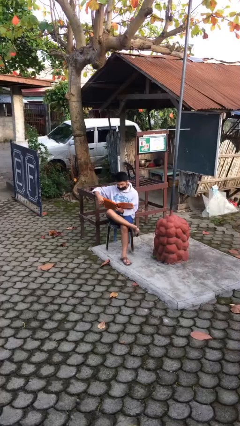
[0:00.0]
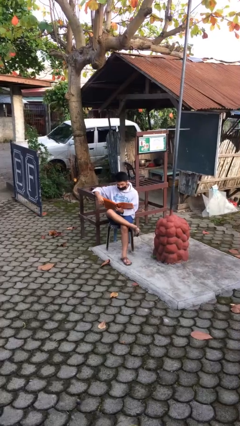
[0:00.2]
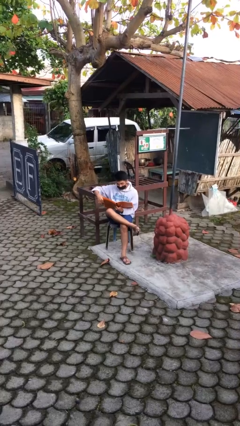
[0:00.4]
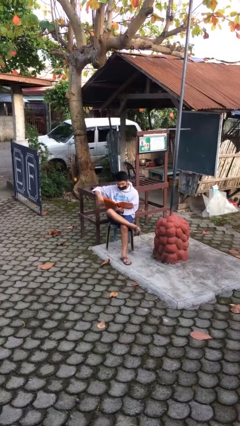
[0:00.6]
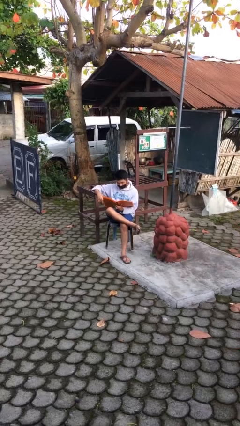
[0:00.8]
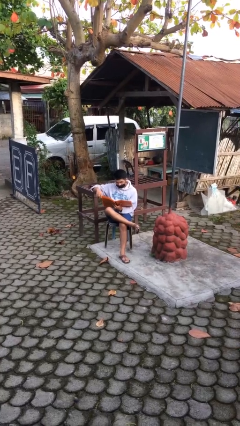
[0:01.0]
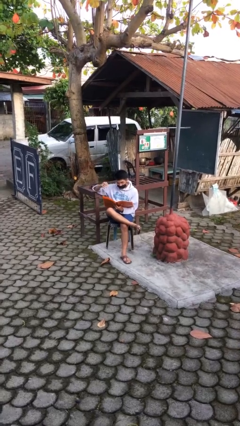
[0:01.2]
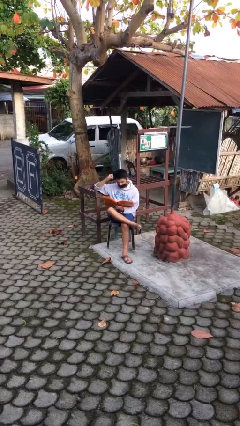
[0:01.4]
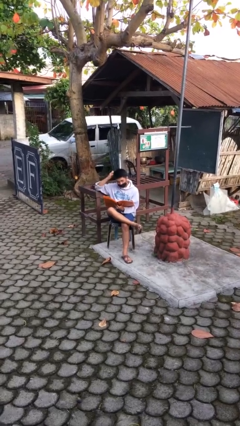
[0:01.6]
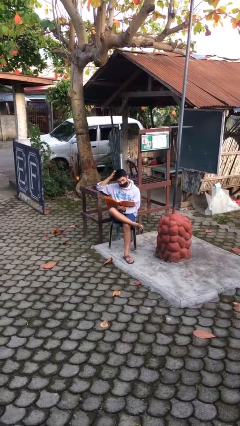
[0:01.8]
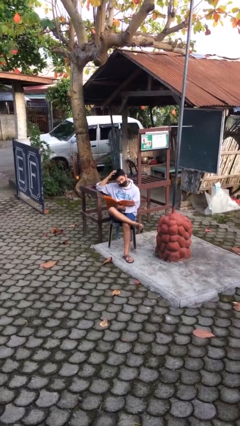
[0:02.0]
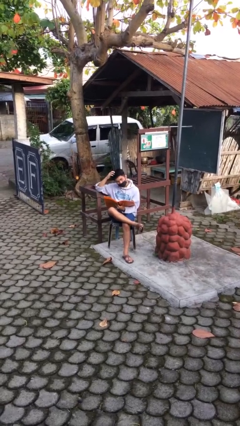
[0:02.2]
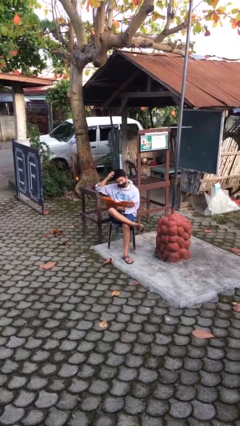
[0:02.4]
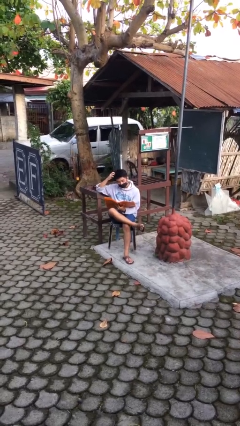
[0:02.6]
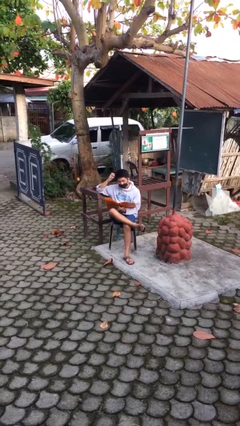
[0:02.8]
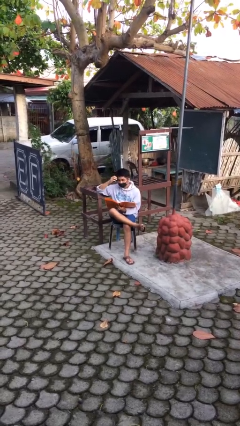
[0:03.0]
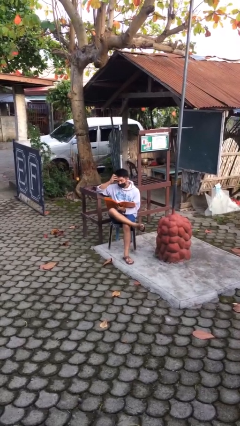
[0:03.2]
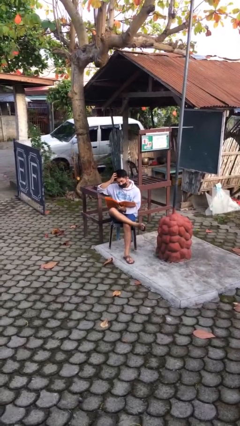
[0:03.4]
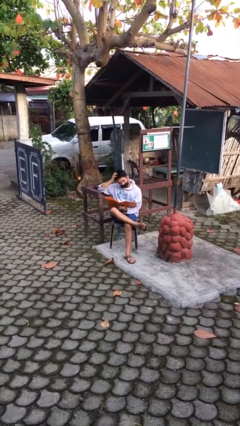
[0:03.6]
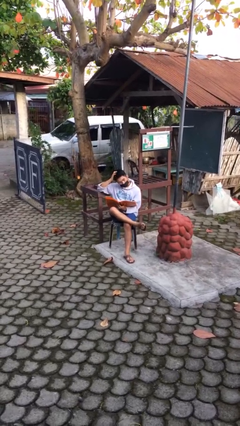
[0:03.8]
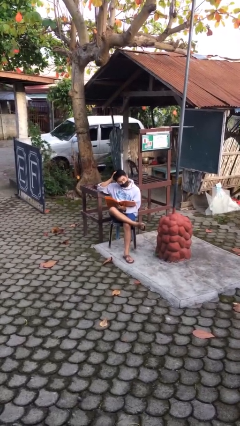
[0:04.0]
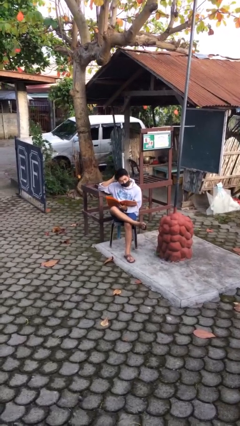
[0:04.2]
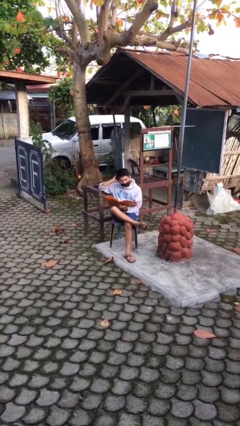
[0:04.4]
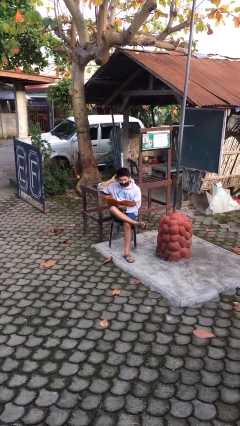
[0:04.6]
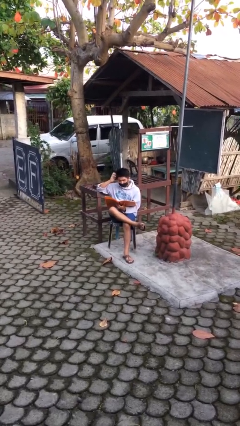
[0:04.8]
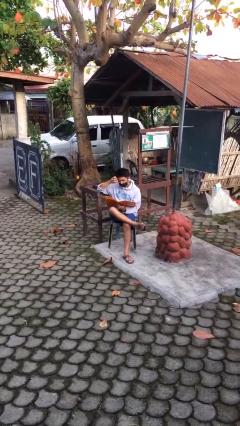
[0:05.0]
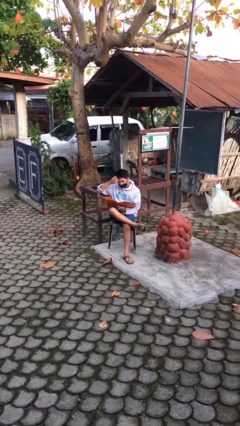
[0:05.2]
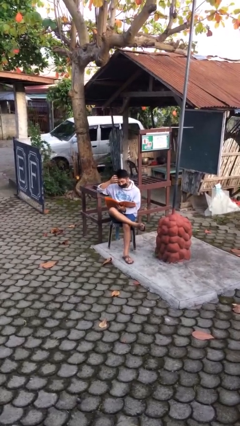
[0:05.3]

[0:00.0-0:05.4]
person reads document

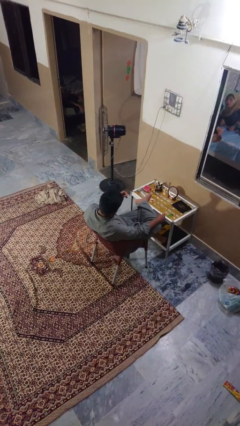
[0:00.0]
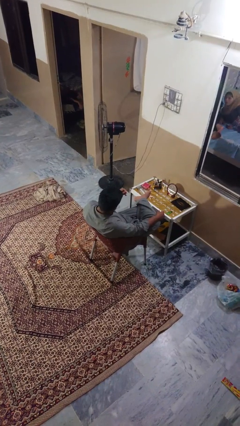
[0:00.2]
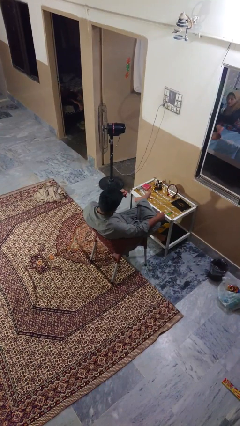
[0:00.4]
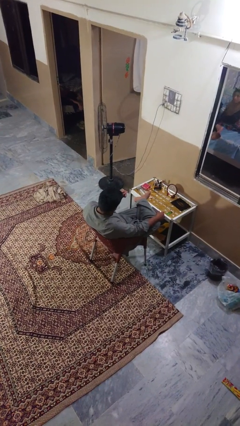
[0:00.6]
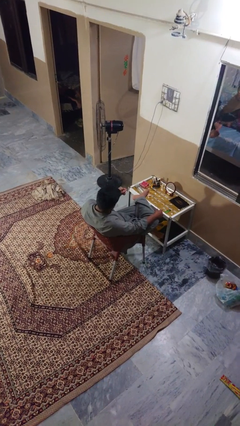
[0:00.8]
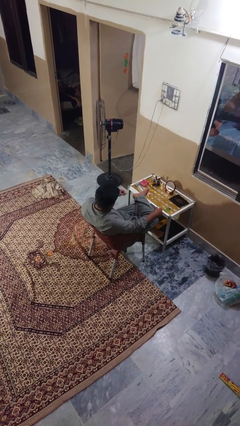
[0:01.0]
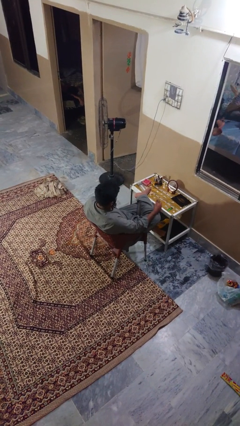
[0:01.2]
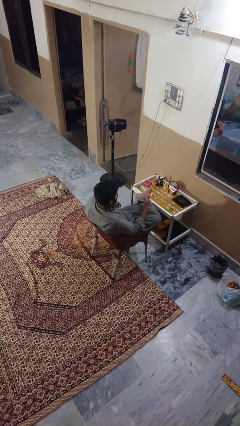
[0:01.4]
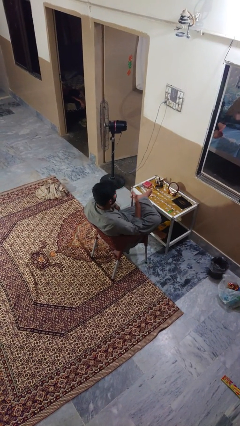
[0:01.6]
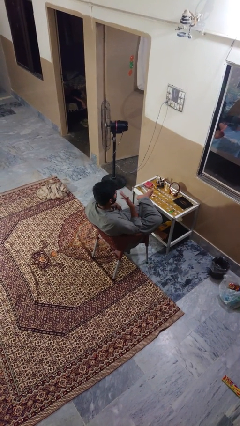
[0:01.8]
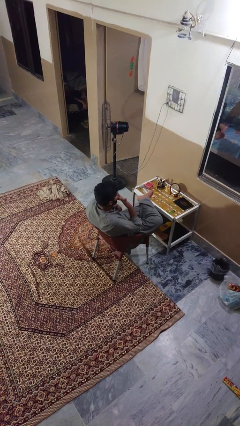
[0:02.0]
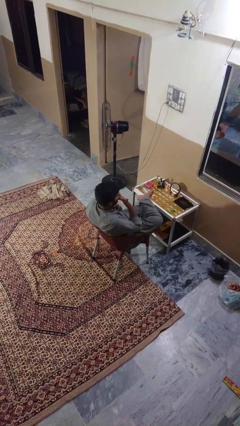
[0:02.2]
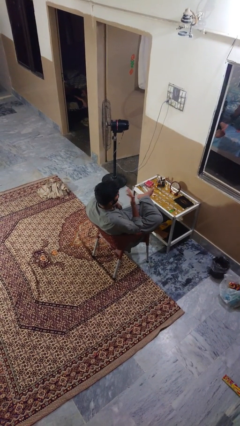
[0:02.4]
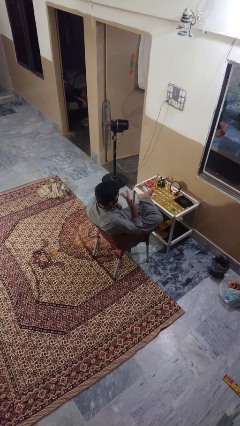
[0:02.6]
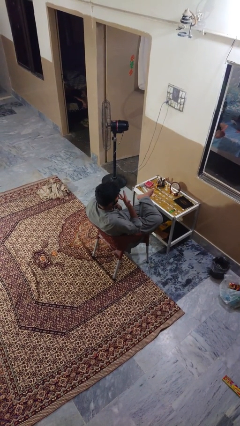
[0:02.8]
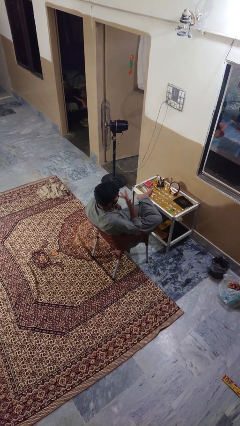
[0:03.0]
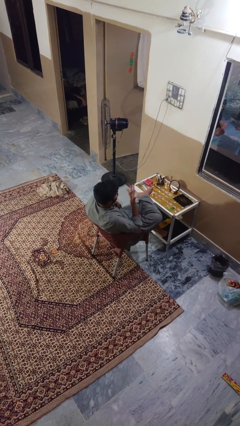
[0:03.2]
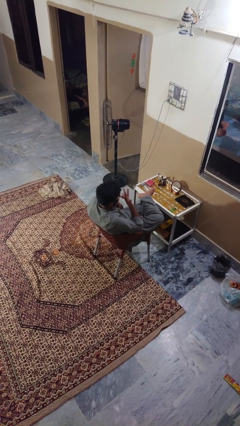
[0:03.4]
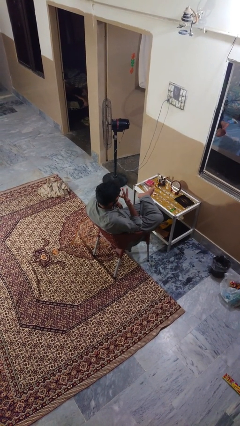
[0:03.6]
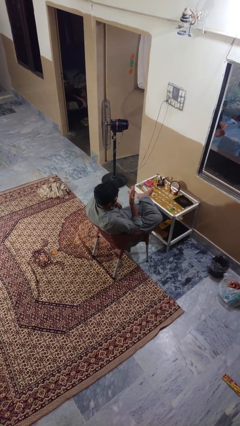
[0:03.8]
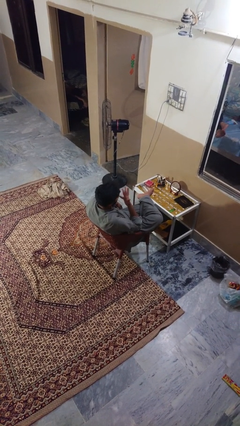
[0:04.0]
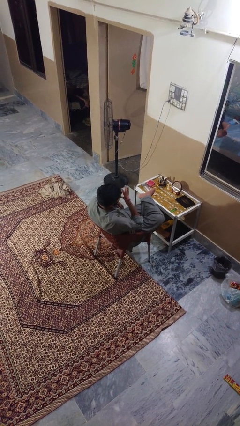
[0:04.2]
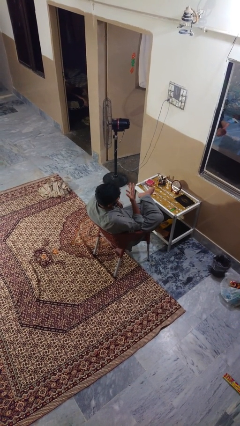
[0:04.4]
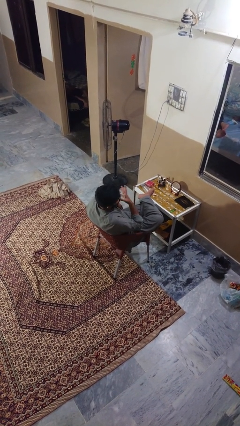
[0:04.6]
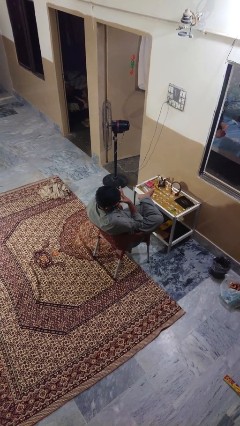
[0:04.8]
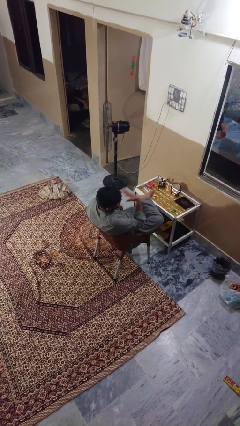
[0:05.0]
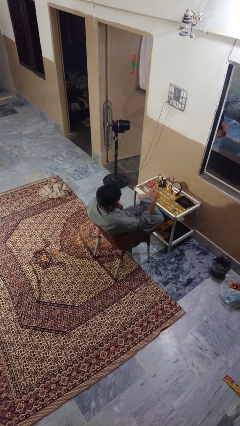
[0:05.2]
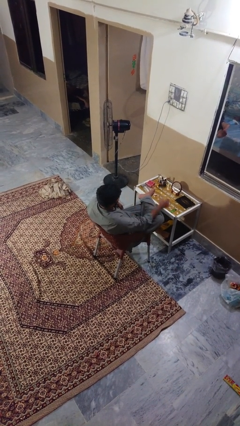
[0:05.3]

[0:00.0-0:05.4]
person licks fingers

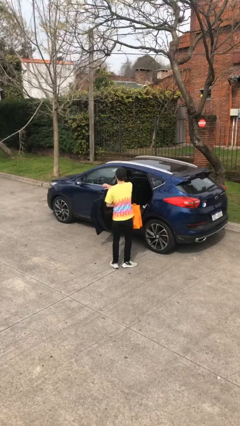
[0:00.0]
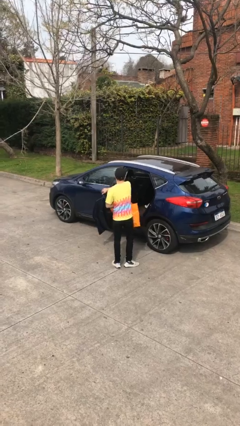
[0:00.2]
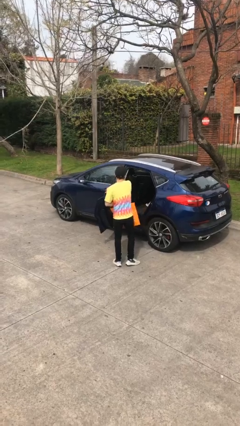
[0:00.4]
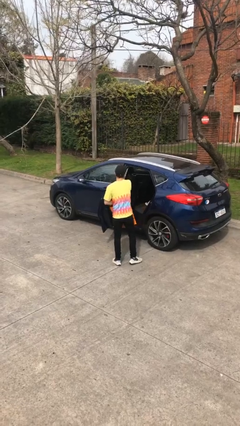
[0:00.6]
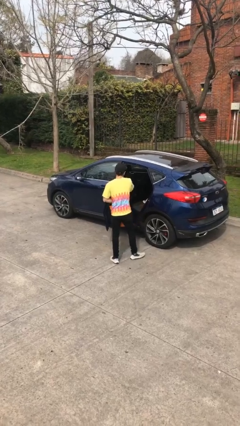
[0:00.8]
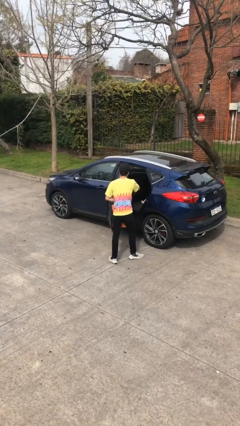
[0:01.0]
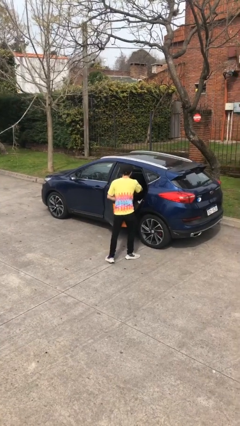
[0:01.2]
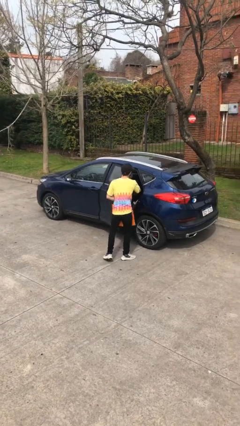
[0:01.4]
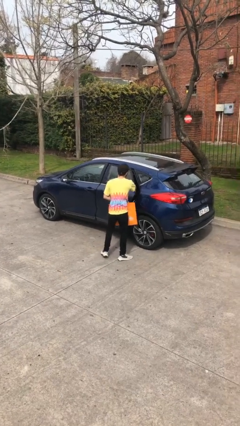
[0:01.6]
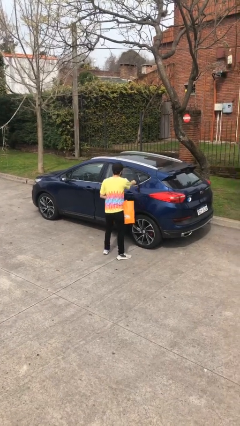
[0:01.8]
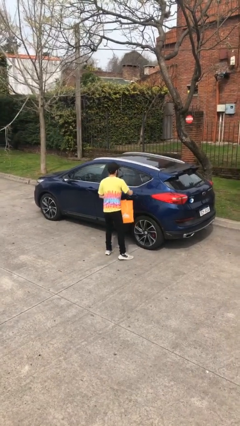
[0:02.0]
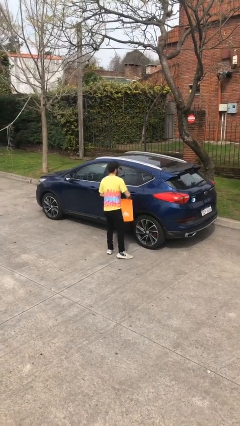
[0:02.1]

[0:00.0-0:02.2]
person closes car door

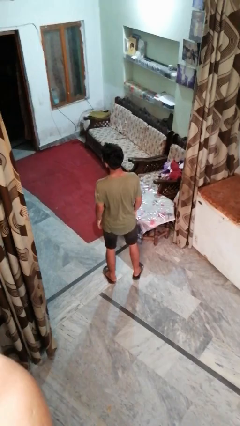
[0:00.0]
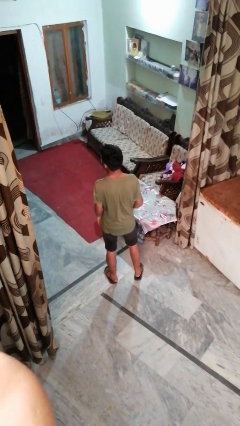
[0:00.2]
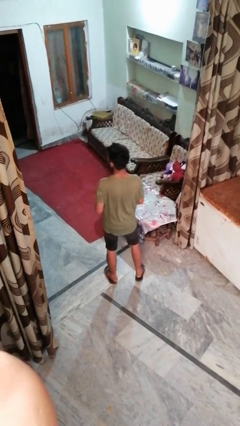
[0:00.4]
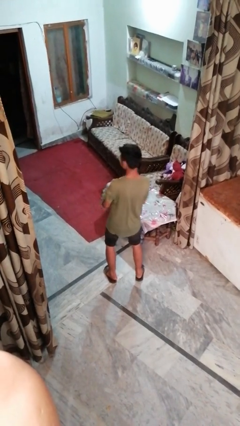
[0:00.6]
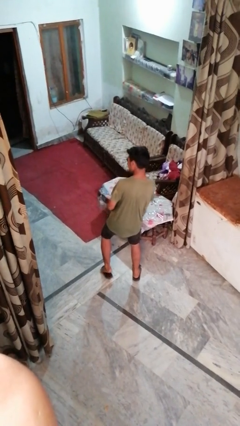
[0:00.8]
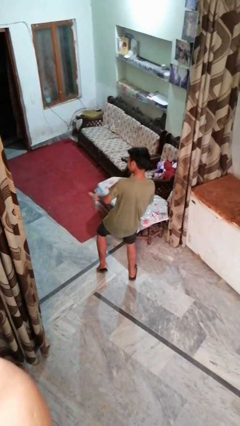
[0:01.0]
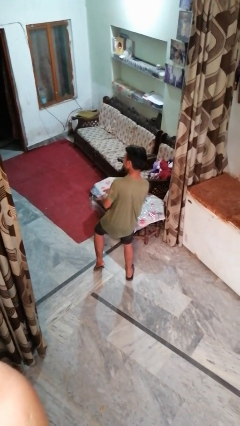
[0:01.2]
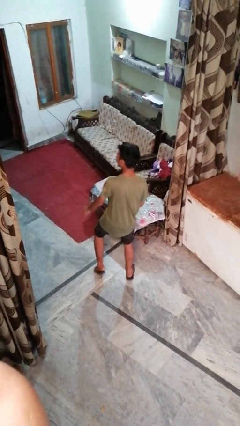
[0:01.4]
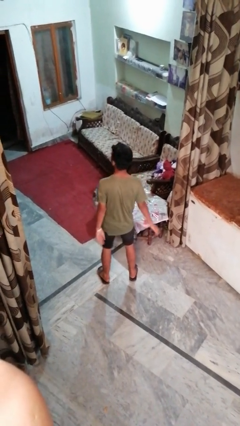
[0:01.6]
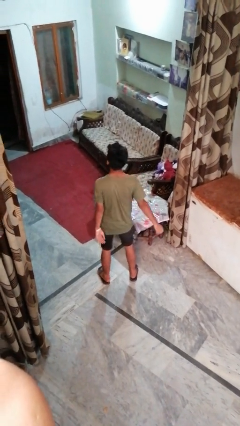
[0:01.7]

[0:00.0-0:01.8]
person dances in place

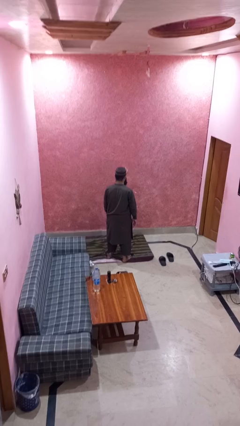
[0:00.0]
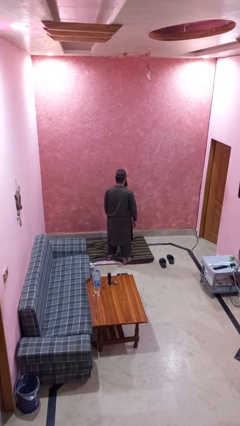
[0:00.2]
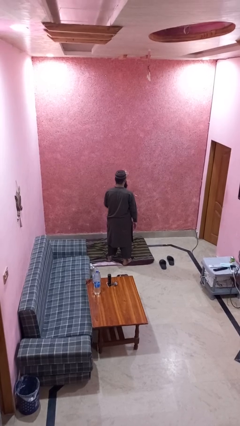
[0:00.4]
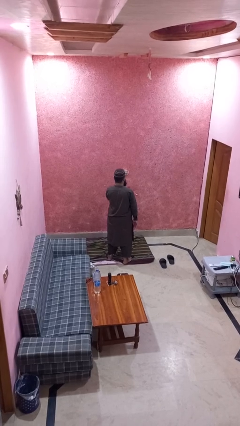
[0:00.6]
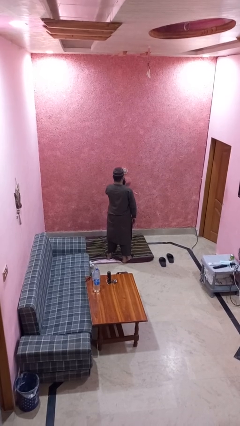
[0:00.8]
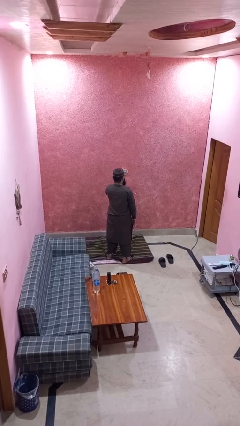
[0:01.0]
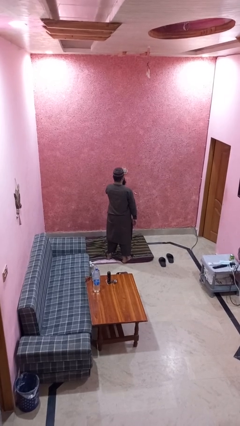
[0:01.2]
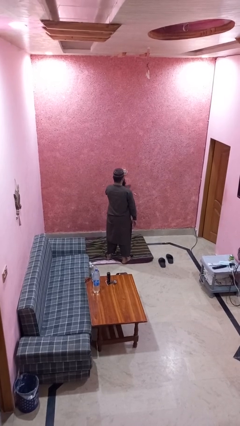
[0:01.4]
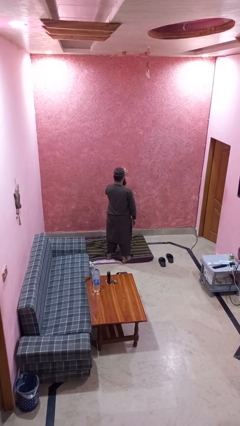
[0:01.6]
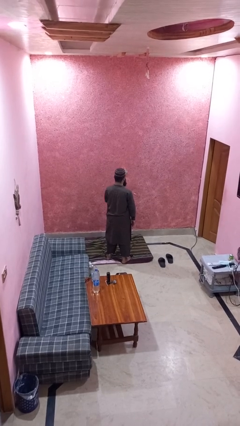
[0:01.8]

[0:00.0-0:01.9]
person drums on chest

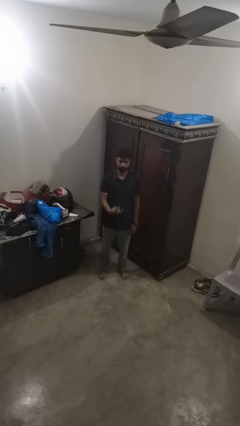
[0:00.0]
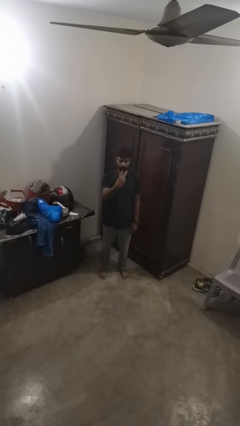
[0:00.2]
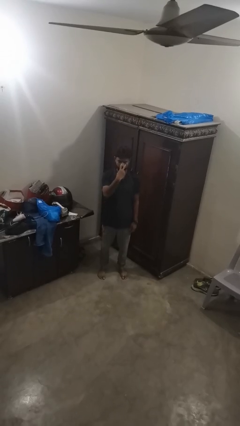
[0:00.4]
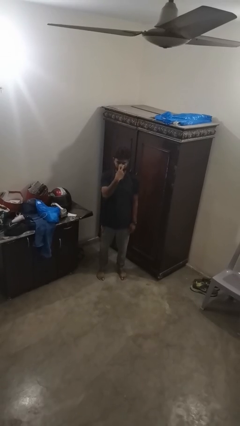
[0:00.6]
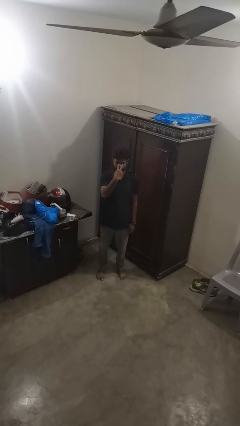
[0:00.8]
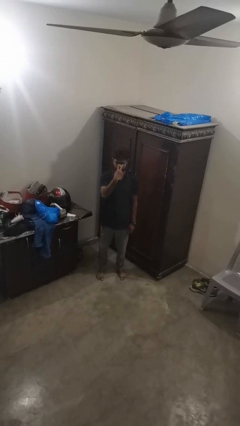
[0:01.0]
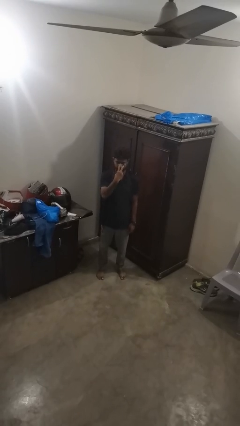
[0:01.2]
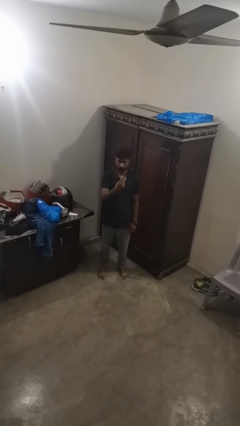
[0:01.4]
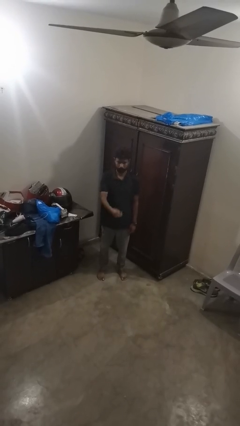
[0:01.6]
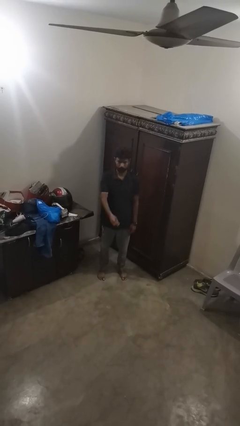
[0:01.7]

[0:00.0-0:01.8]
person gestures watch closely
